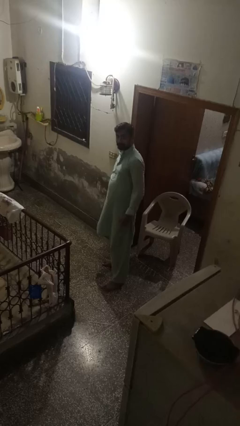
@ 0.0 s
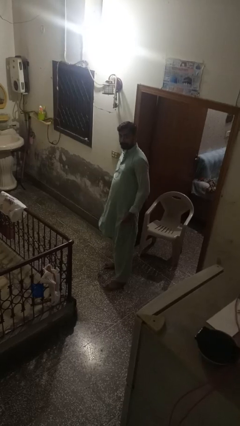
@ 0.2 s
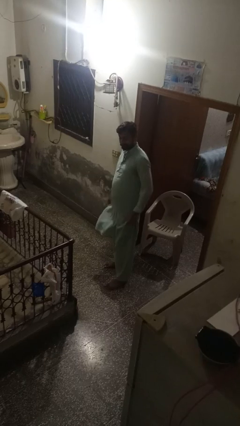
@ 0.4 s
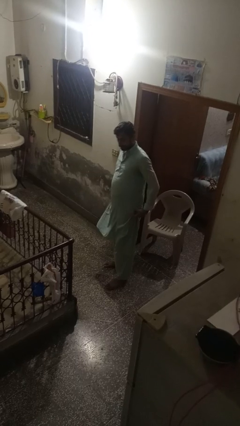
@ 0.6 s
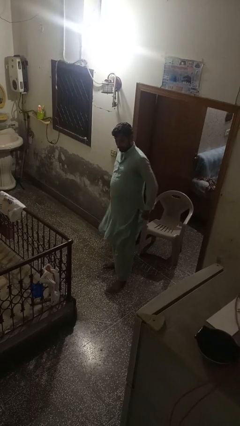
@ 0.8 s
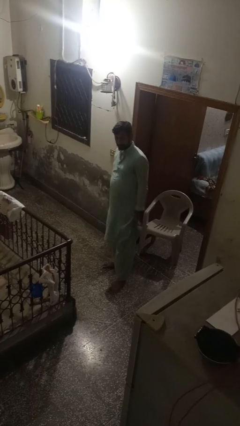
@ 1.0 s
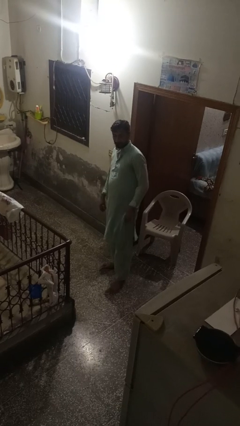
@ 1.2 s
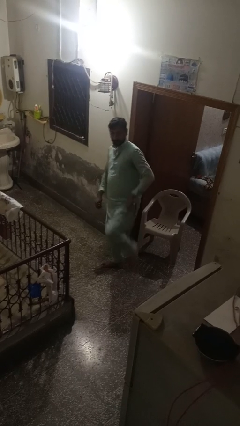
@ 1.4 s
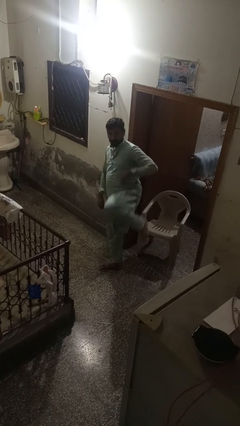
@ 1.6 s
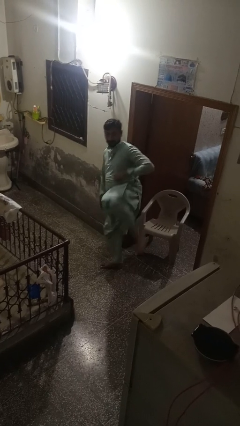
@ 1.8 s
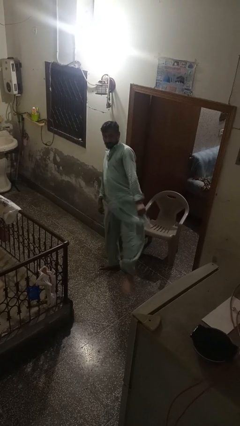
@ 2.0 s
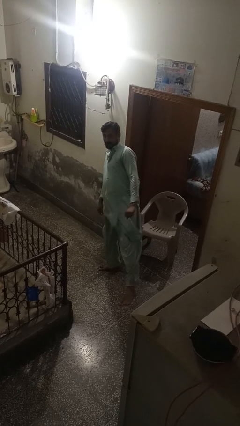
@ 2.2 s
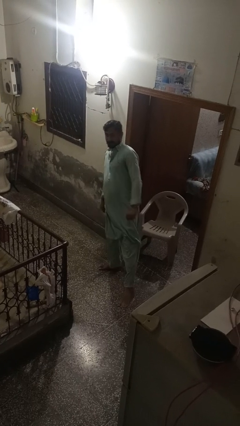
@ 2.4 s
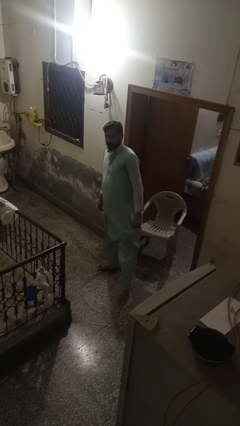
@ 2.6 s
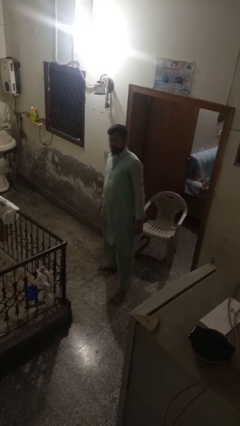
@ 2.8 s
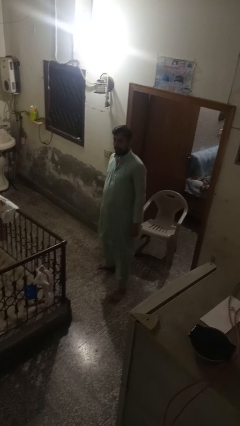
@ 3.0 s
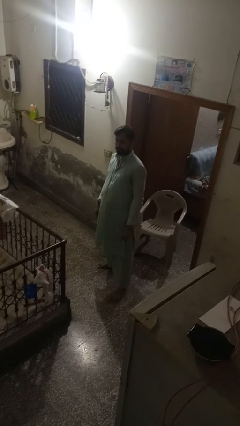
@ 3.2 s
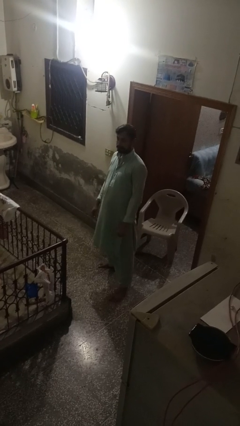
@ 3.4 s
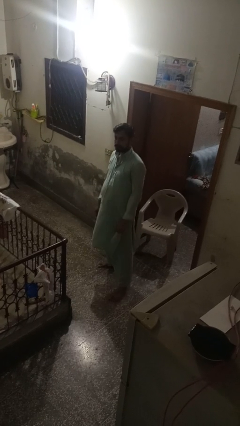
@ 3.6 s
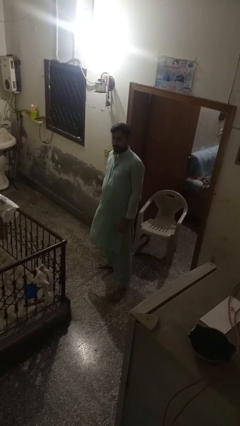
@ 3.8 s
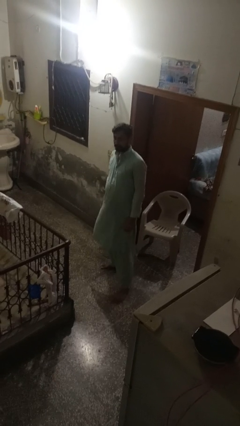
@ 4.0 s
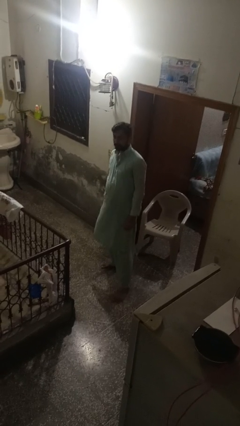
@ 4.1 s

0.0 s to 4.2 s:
person karate kicks

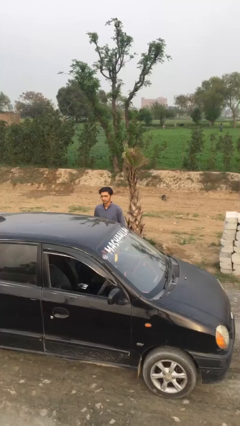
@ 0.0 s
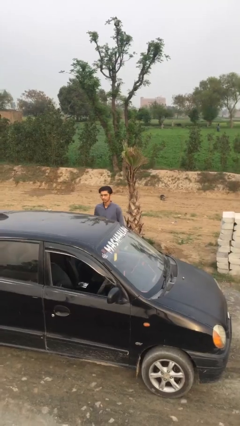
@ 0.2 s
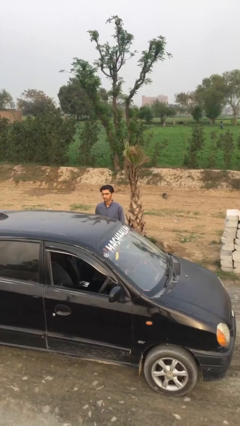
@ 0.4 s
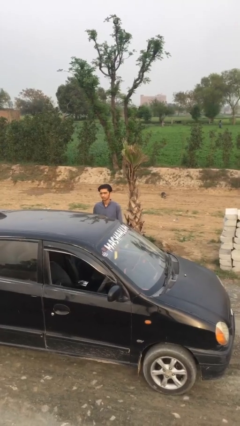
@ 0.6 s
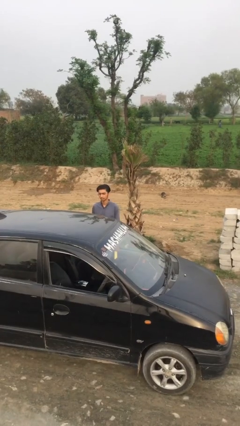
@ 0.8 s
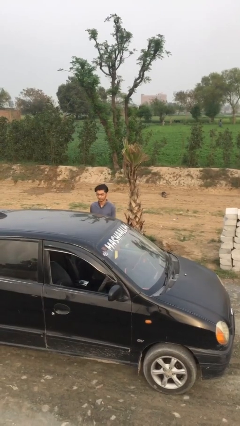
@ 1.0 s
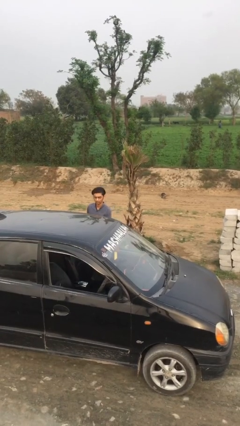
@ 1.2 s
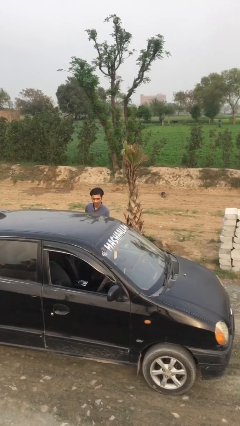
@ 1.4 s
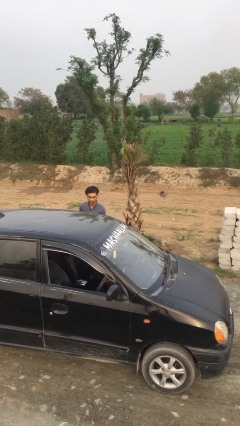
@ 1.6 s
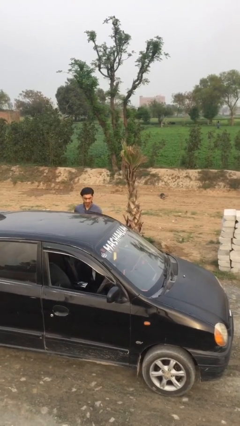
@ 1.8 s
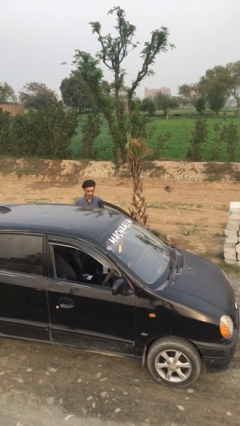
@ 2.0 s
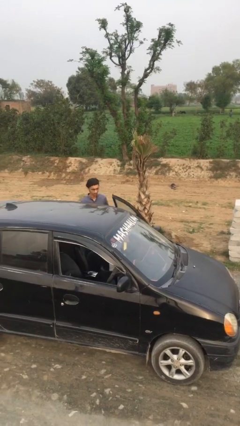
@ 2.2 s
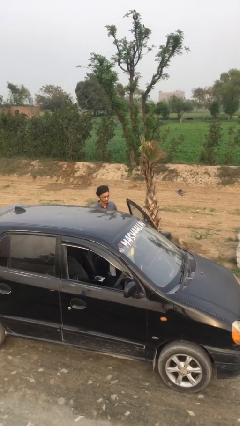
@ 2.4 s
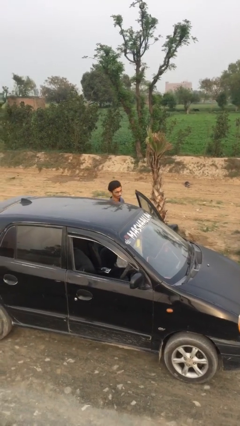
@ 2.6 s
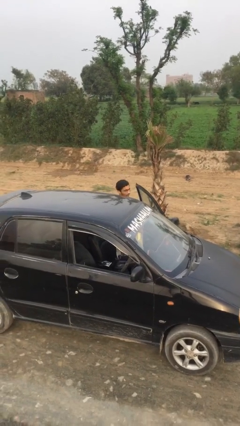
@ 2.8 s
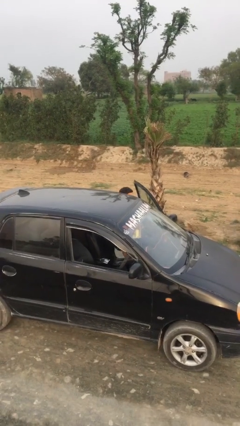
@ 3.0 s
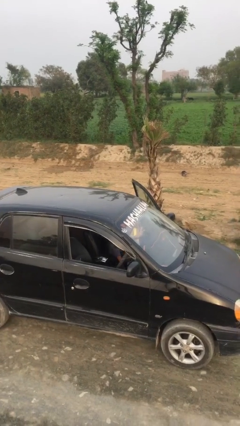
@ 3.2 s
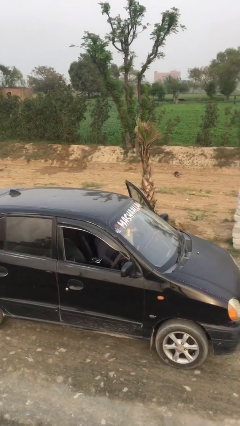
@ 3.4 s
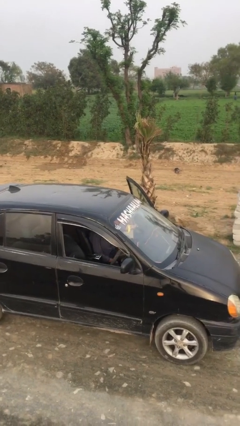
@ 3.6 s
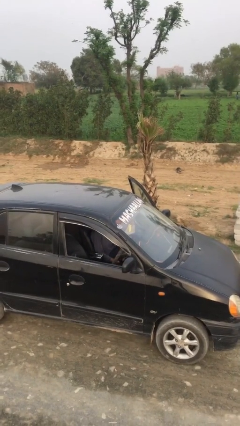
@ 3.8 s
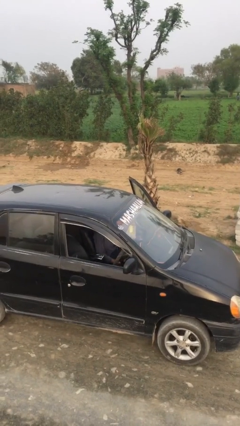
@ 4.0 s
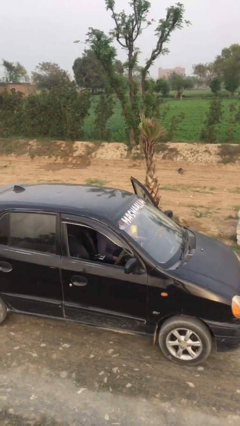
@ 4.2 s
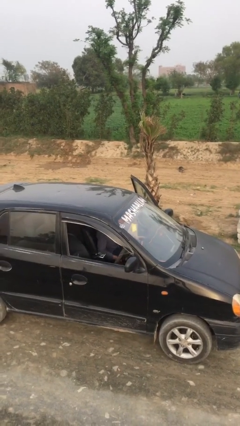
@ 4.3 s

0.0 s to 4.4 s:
person enters car

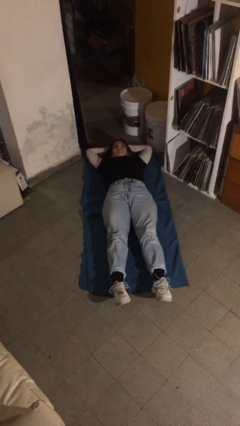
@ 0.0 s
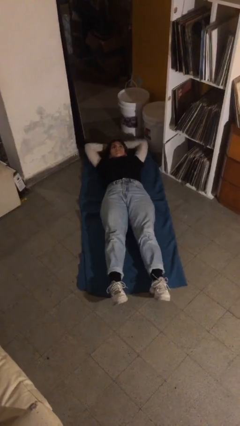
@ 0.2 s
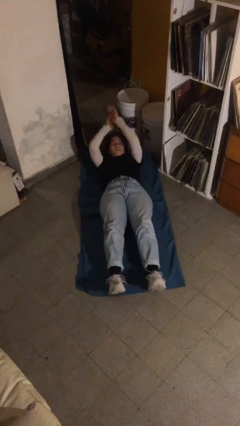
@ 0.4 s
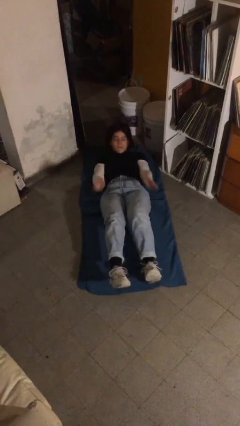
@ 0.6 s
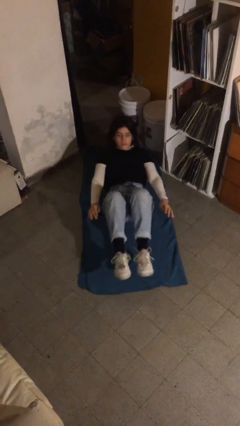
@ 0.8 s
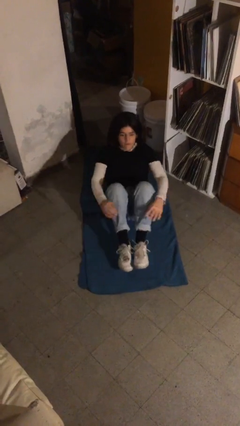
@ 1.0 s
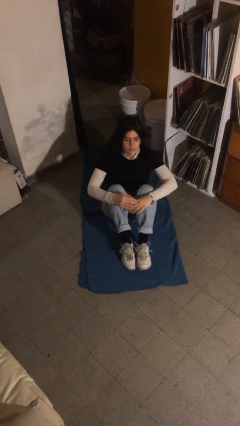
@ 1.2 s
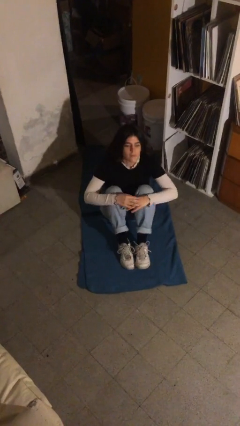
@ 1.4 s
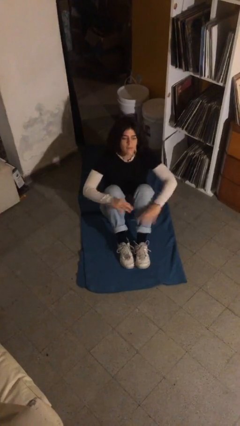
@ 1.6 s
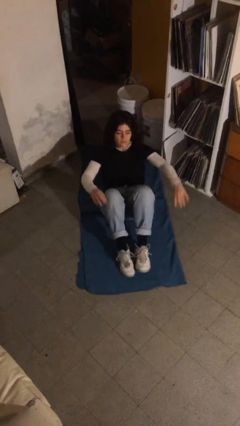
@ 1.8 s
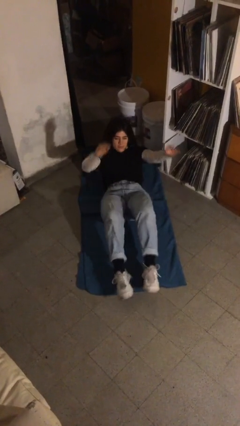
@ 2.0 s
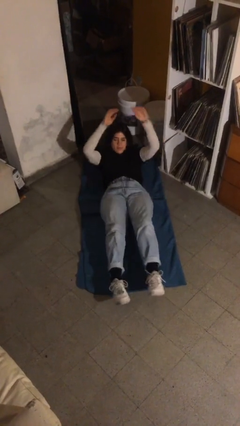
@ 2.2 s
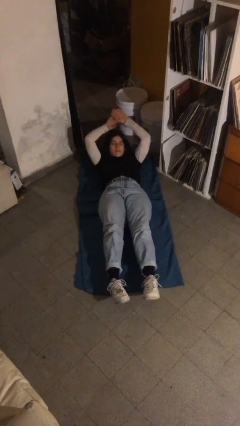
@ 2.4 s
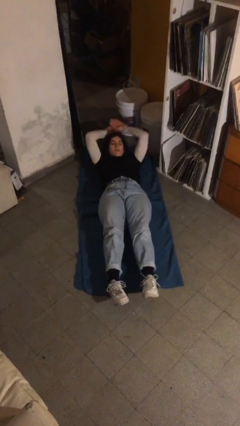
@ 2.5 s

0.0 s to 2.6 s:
person exercises with situp

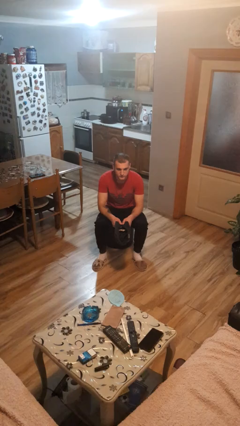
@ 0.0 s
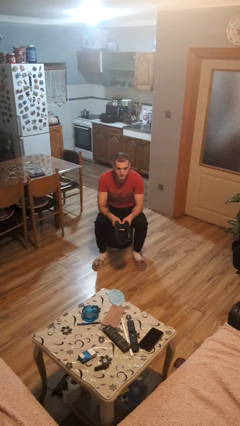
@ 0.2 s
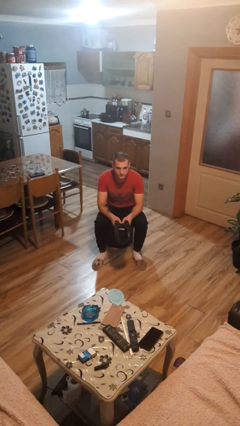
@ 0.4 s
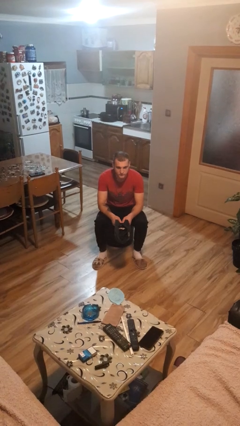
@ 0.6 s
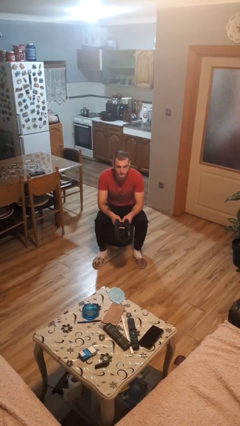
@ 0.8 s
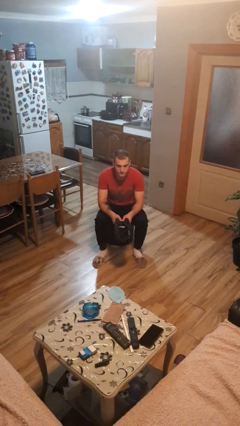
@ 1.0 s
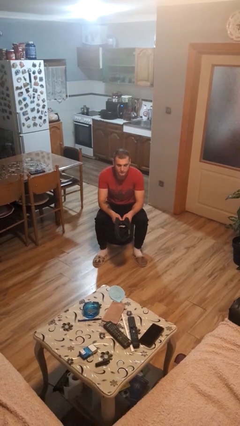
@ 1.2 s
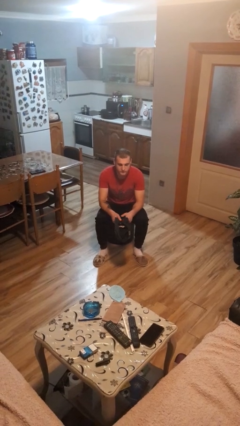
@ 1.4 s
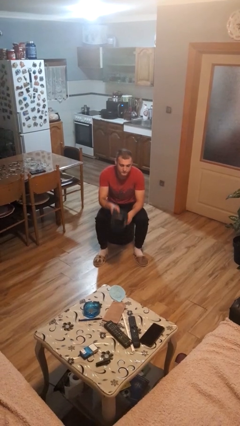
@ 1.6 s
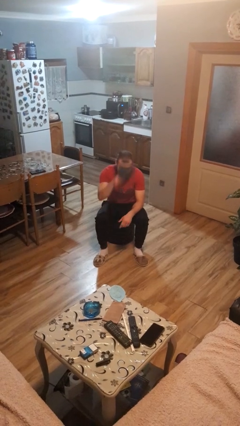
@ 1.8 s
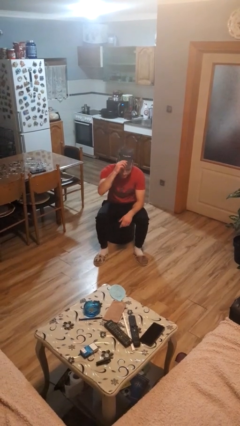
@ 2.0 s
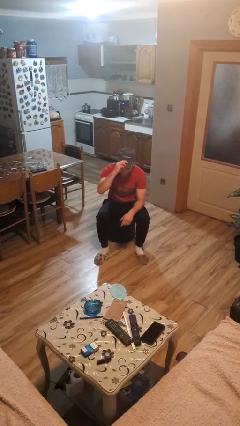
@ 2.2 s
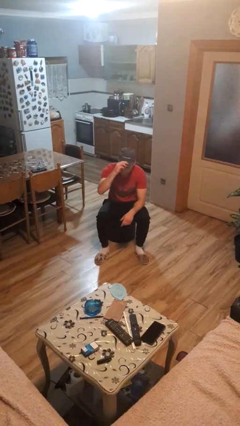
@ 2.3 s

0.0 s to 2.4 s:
person puts on hat

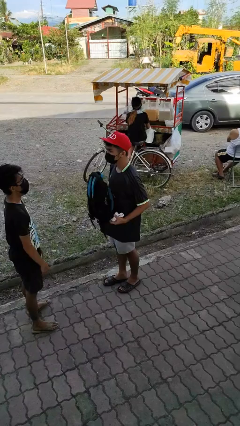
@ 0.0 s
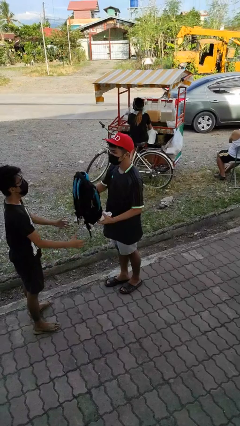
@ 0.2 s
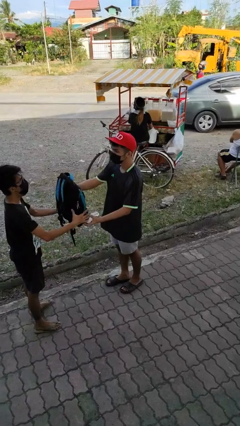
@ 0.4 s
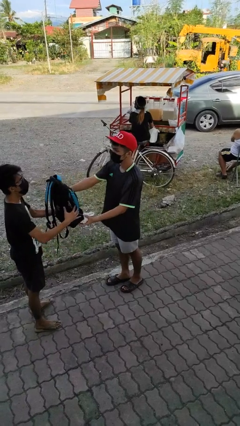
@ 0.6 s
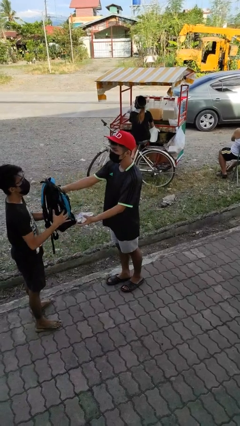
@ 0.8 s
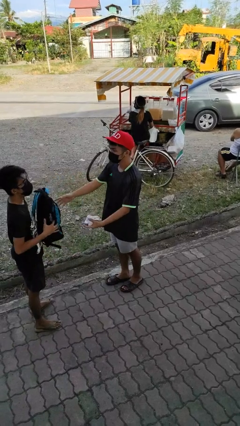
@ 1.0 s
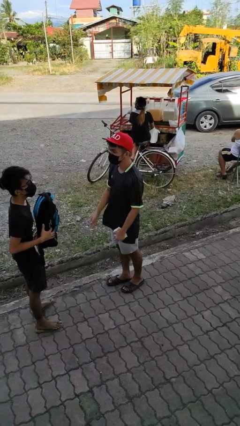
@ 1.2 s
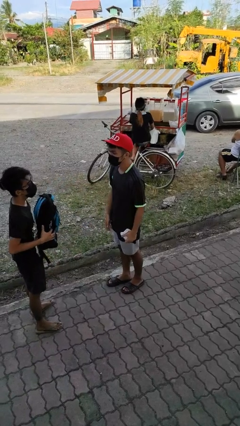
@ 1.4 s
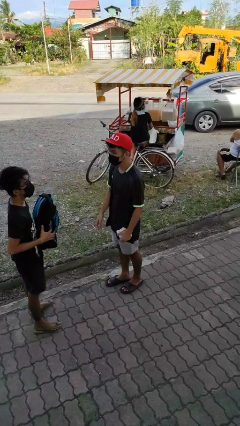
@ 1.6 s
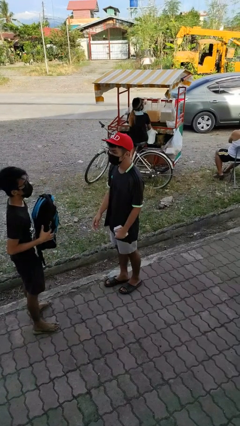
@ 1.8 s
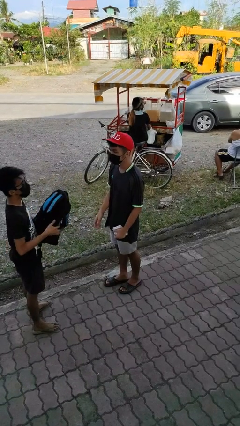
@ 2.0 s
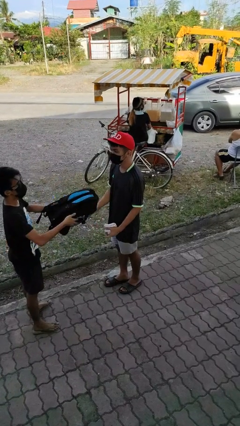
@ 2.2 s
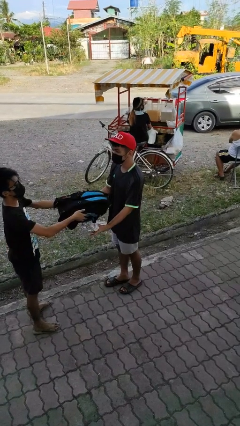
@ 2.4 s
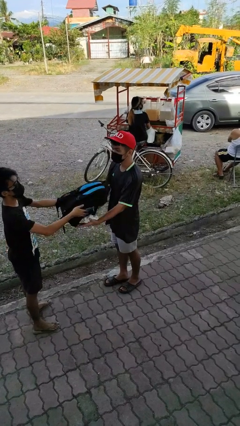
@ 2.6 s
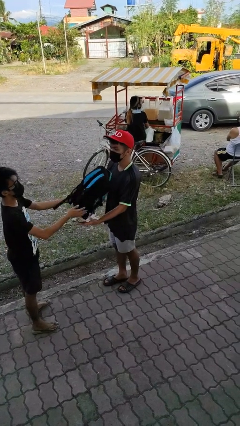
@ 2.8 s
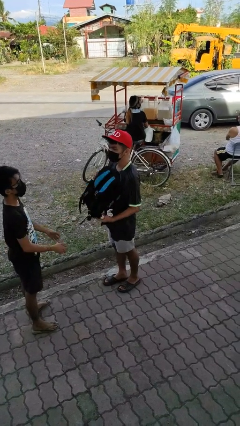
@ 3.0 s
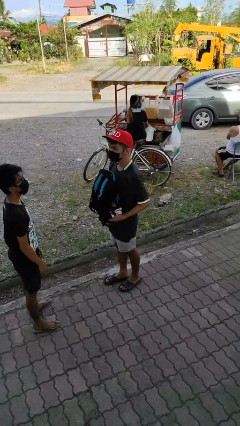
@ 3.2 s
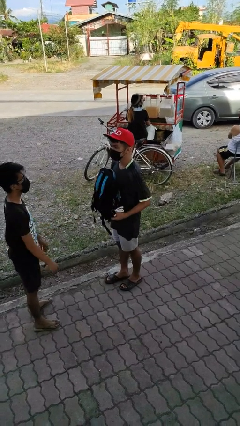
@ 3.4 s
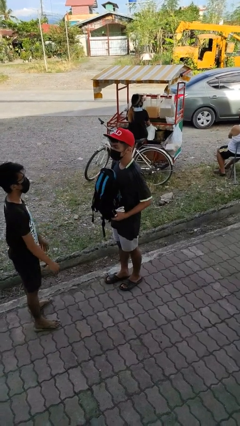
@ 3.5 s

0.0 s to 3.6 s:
person transfers object to person

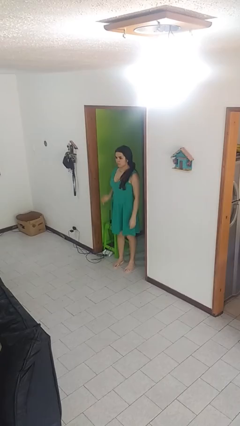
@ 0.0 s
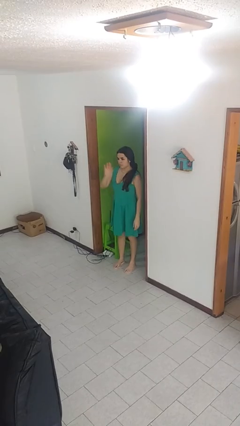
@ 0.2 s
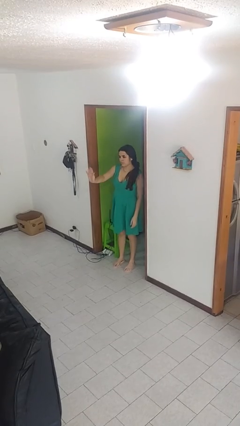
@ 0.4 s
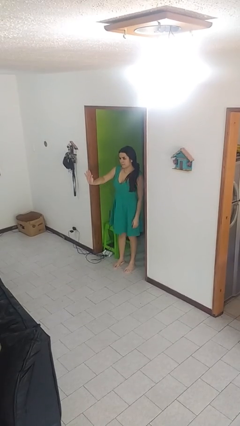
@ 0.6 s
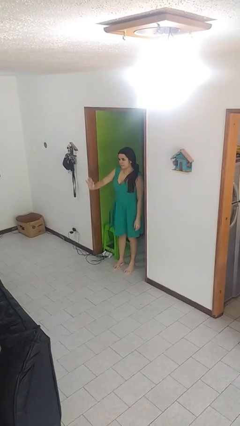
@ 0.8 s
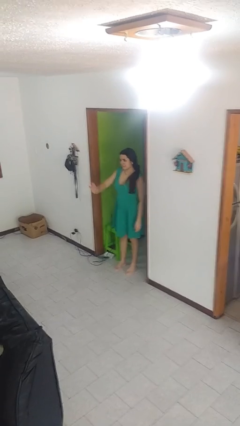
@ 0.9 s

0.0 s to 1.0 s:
person gestures stop
